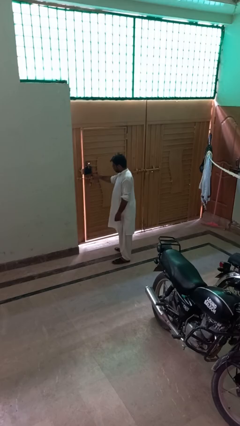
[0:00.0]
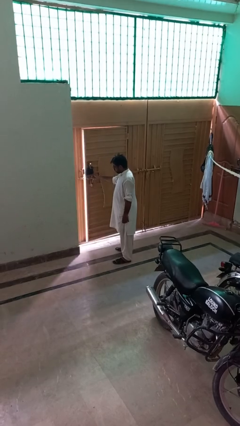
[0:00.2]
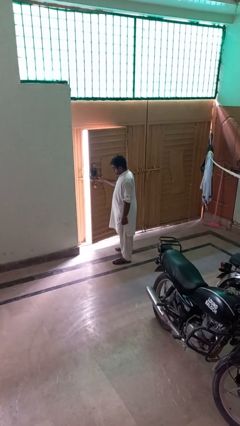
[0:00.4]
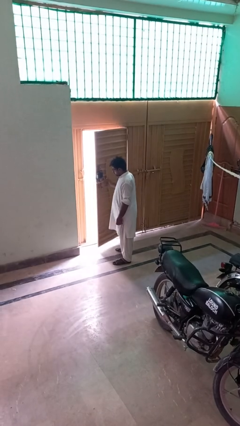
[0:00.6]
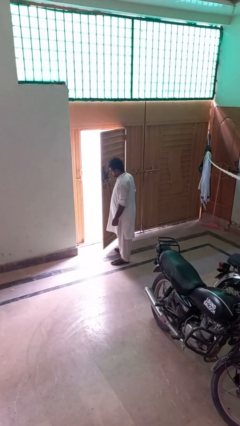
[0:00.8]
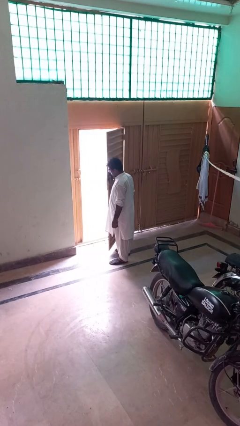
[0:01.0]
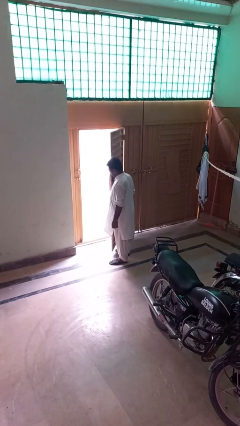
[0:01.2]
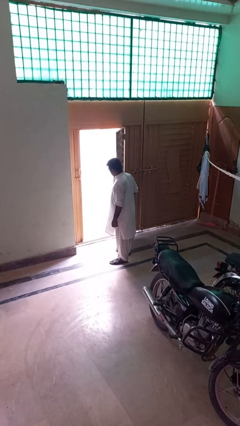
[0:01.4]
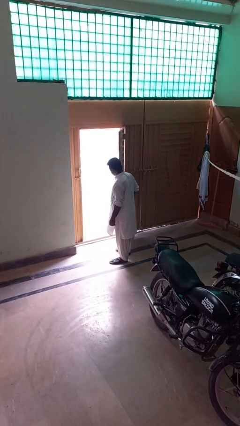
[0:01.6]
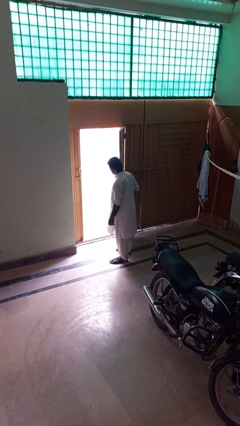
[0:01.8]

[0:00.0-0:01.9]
person opens gate

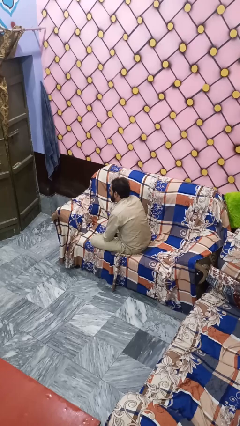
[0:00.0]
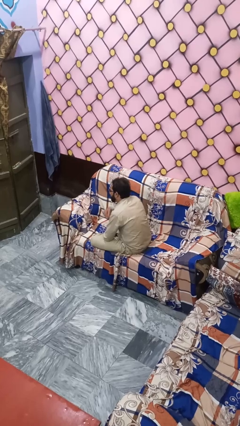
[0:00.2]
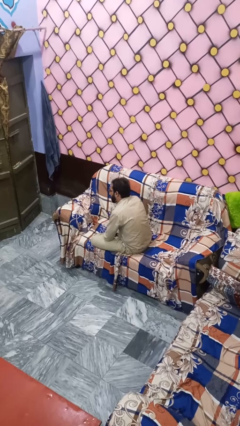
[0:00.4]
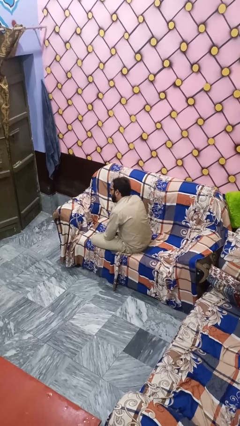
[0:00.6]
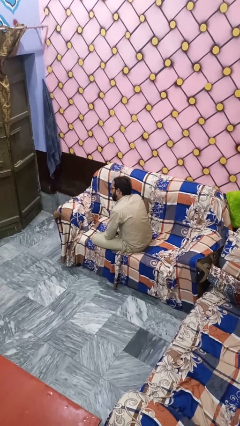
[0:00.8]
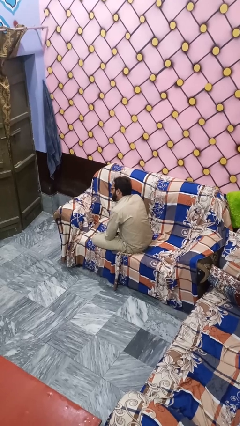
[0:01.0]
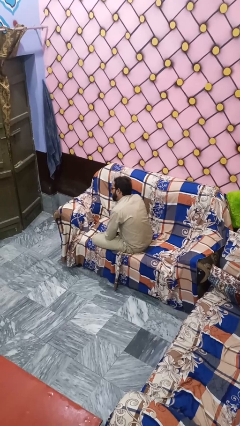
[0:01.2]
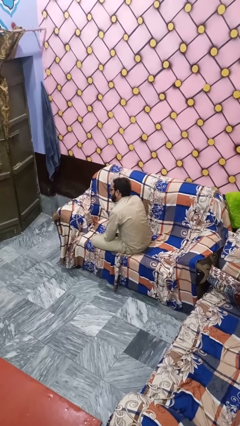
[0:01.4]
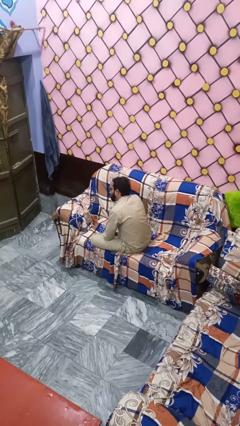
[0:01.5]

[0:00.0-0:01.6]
person sticks out tongue

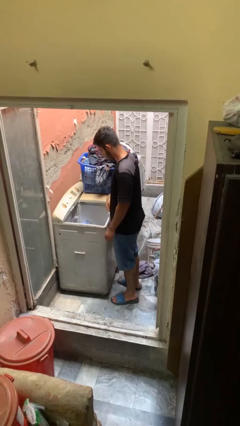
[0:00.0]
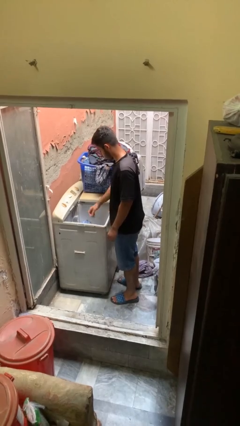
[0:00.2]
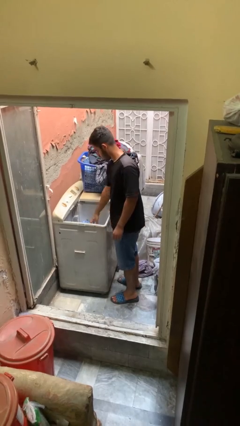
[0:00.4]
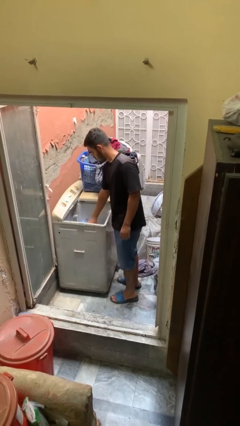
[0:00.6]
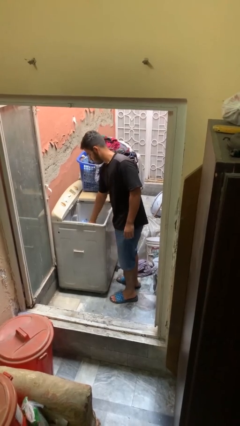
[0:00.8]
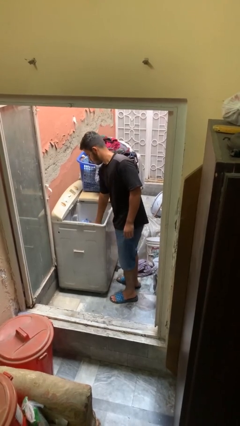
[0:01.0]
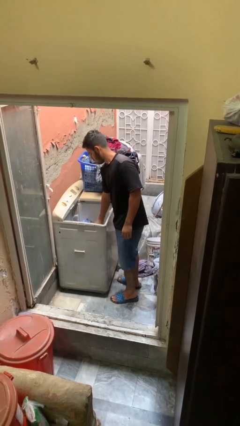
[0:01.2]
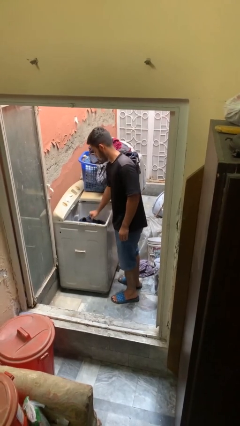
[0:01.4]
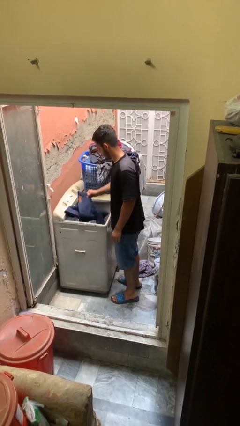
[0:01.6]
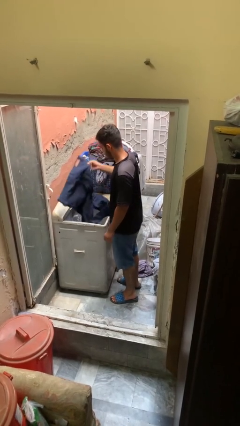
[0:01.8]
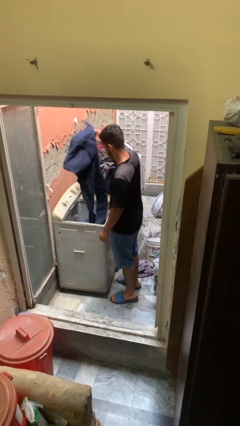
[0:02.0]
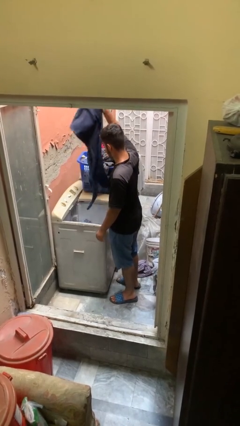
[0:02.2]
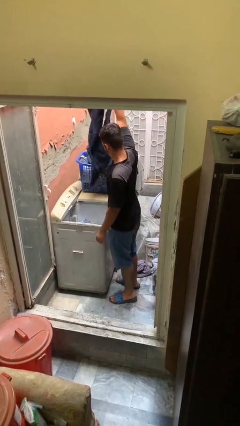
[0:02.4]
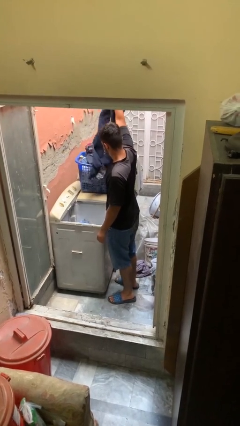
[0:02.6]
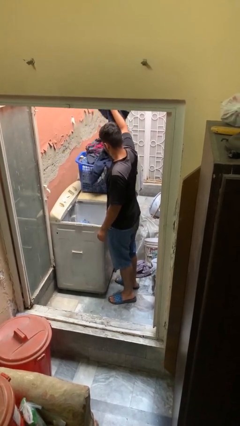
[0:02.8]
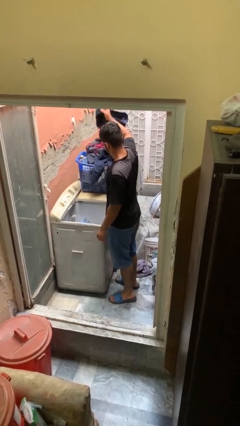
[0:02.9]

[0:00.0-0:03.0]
person loads clotheswasher

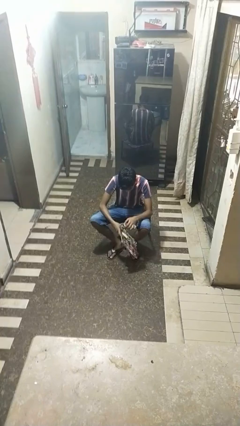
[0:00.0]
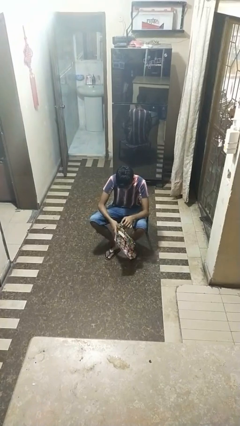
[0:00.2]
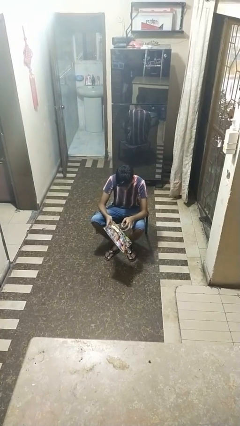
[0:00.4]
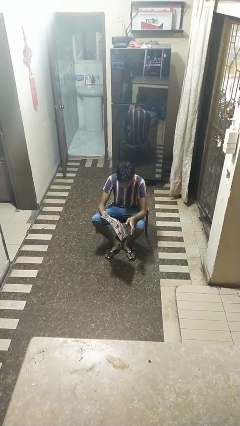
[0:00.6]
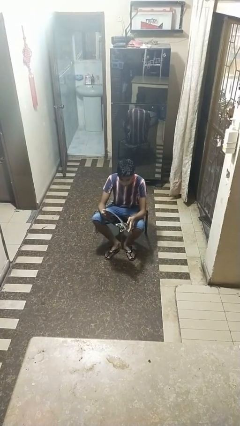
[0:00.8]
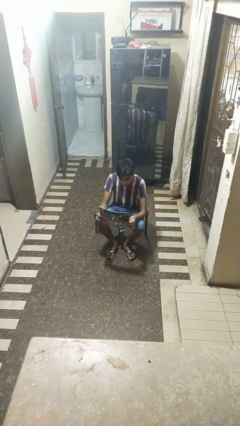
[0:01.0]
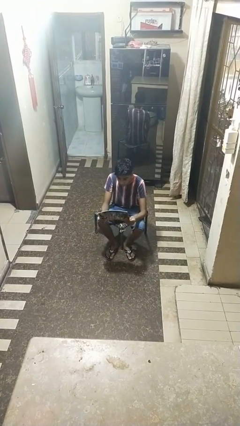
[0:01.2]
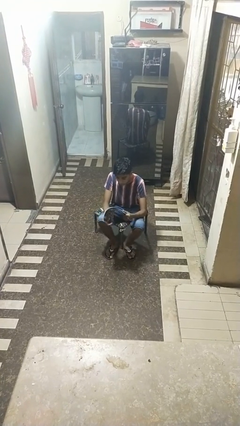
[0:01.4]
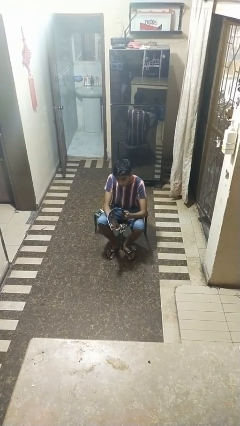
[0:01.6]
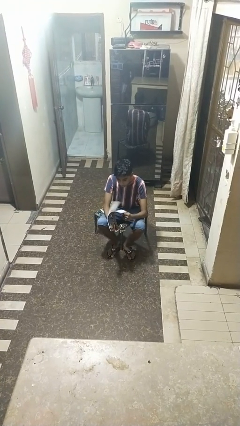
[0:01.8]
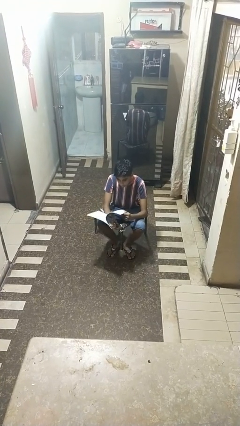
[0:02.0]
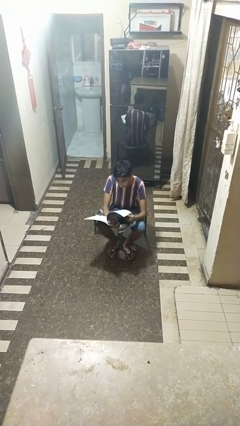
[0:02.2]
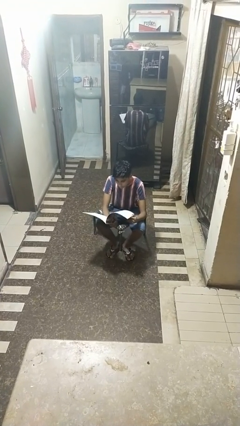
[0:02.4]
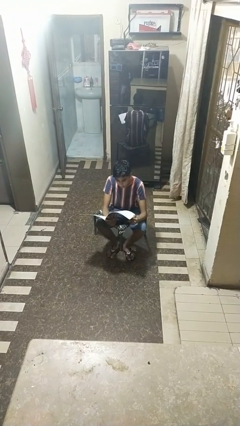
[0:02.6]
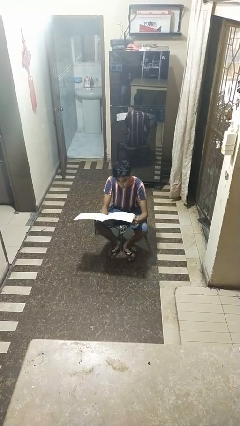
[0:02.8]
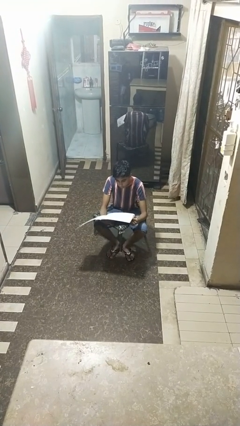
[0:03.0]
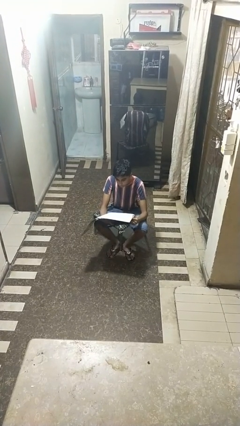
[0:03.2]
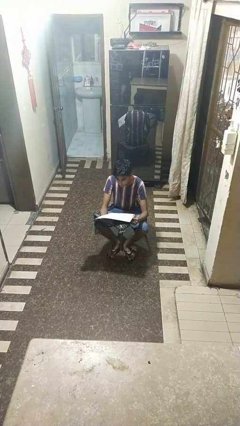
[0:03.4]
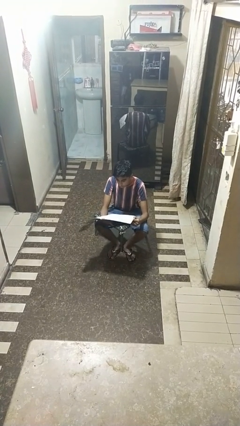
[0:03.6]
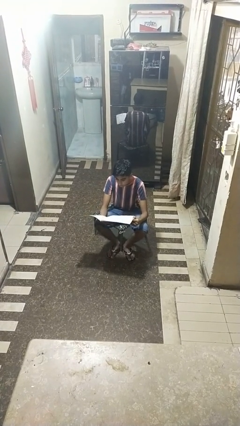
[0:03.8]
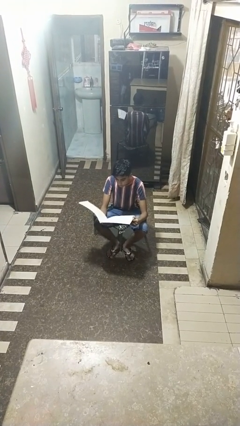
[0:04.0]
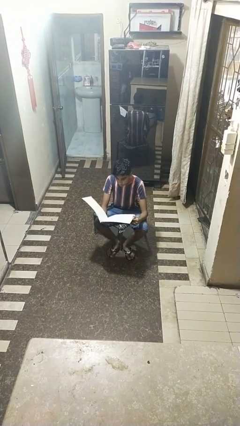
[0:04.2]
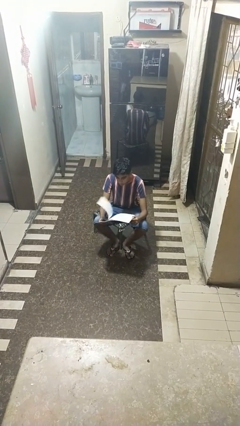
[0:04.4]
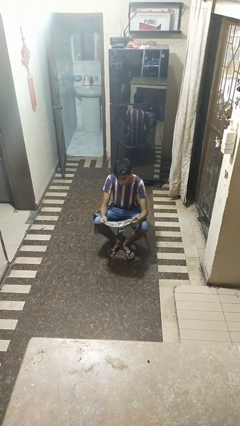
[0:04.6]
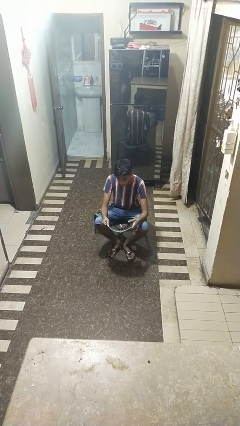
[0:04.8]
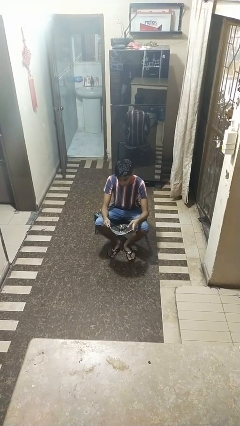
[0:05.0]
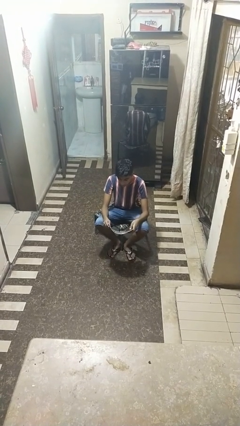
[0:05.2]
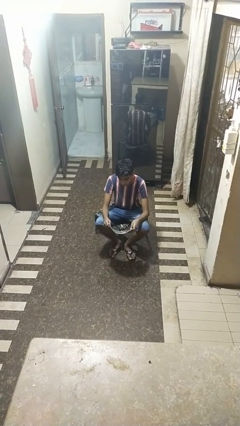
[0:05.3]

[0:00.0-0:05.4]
person reads magazine

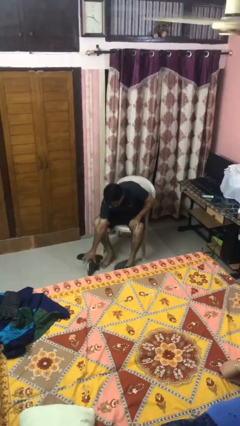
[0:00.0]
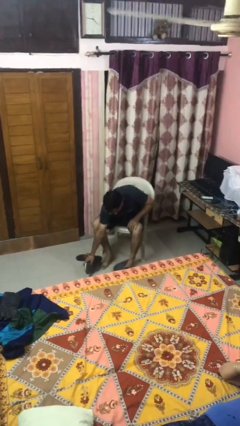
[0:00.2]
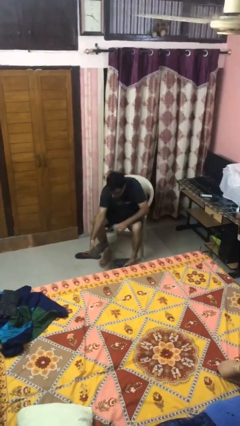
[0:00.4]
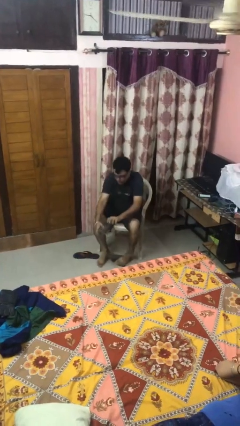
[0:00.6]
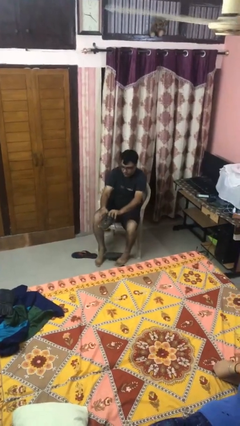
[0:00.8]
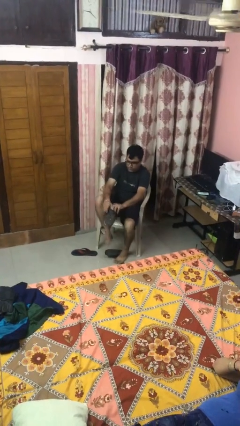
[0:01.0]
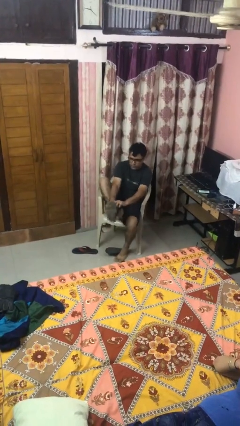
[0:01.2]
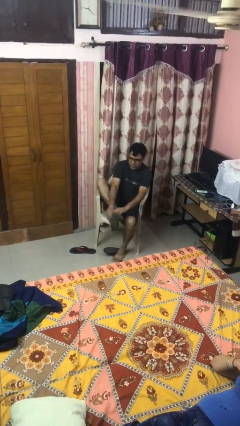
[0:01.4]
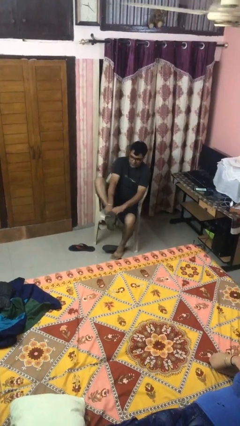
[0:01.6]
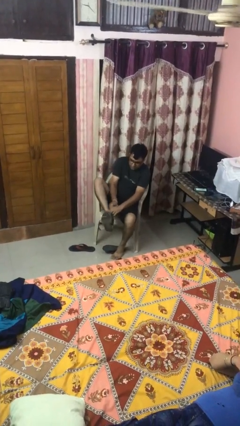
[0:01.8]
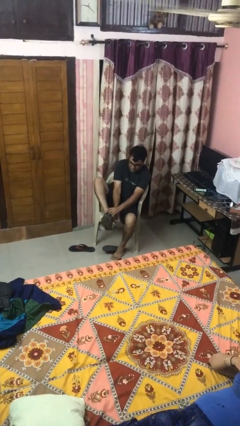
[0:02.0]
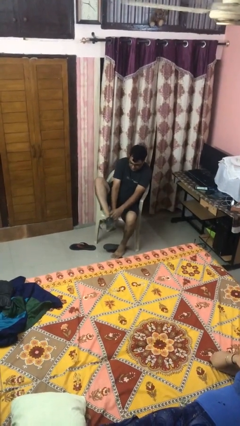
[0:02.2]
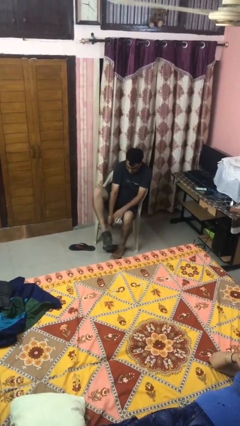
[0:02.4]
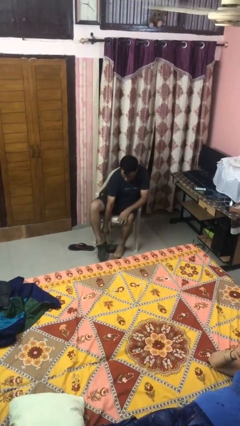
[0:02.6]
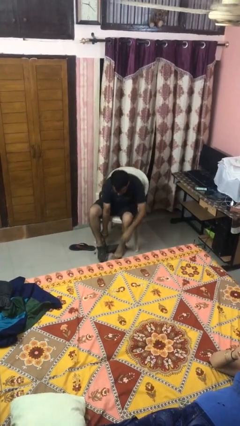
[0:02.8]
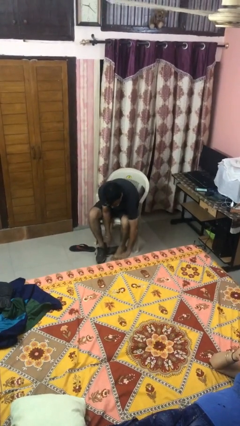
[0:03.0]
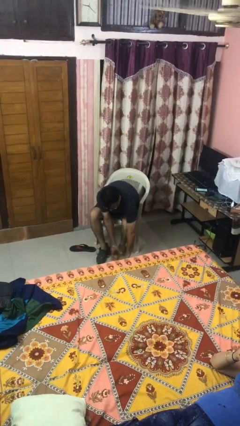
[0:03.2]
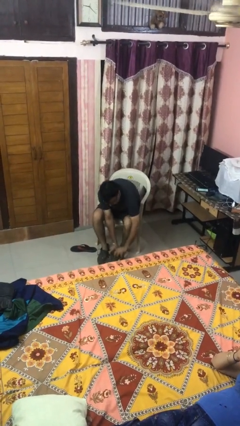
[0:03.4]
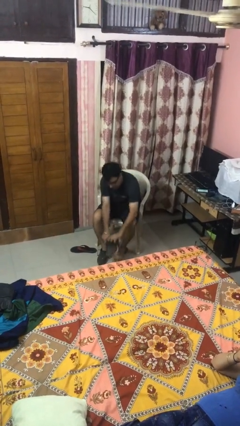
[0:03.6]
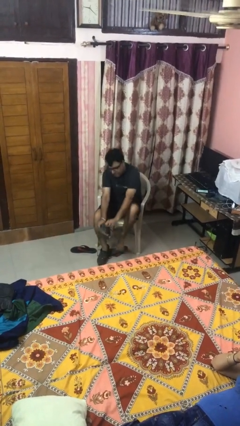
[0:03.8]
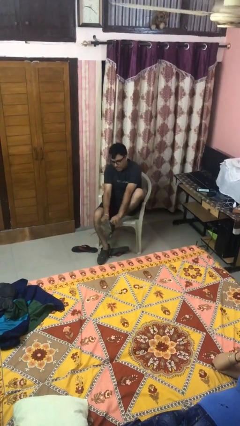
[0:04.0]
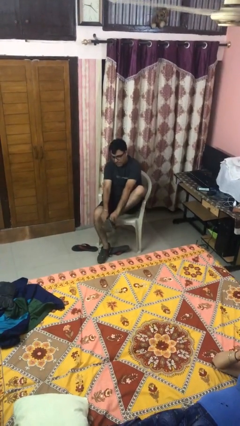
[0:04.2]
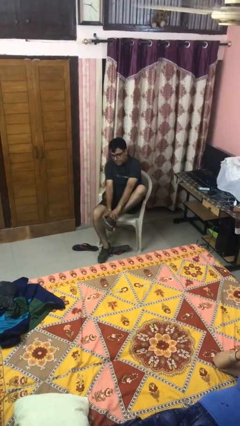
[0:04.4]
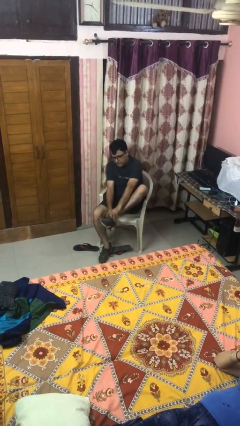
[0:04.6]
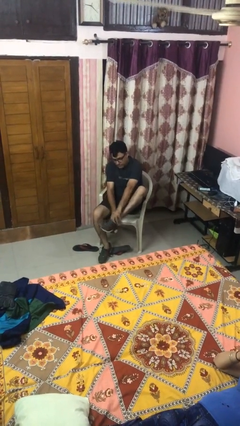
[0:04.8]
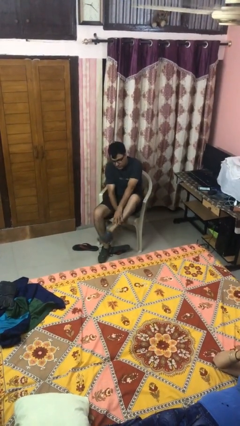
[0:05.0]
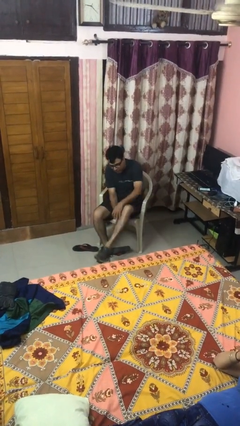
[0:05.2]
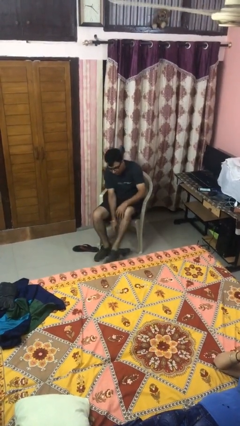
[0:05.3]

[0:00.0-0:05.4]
person puts on shoes

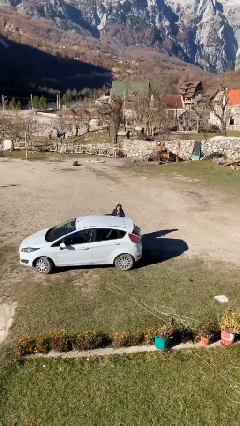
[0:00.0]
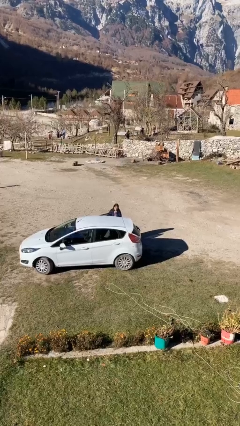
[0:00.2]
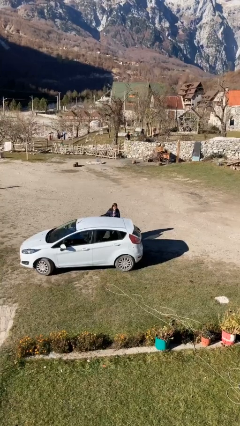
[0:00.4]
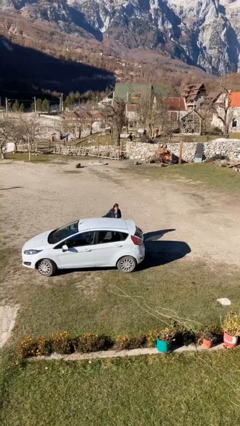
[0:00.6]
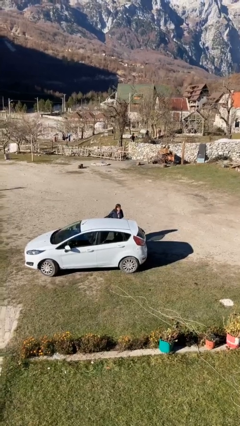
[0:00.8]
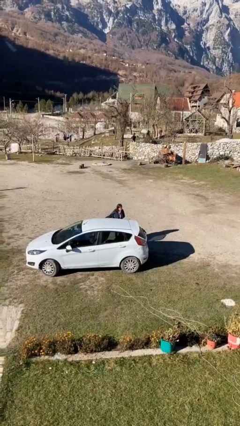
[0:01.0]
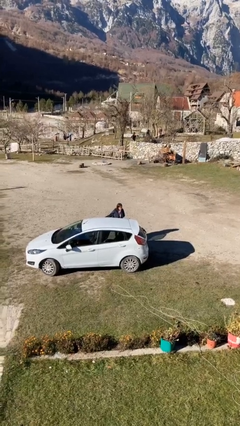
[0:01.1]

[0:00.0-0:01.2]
person opens car door
